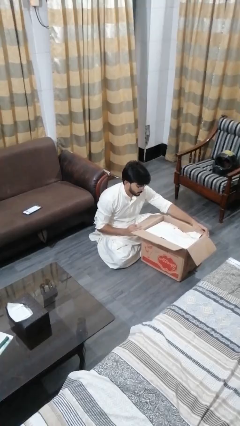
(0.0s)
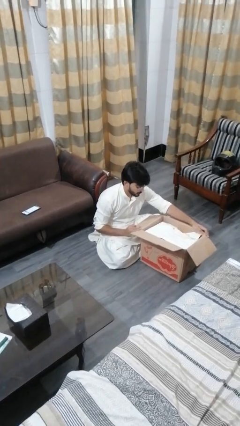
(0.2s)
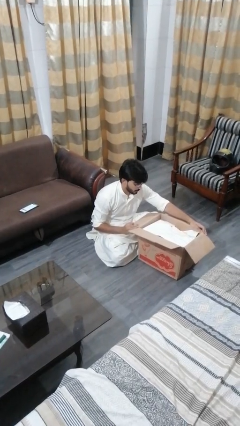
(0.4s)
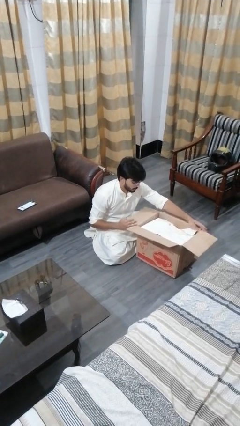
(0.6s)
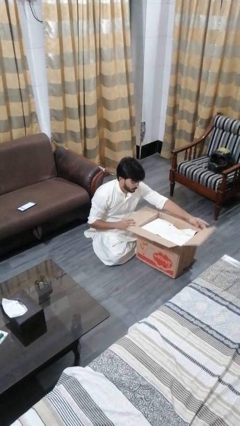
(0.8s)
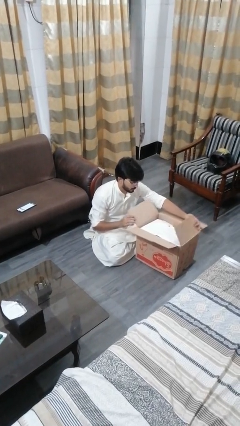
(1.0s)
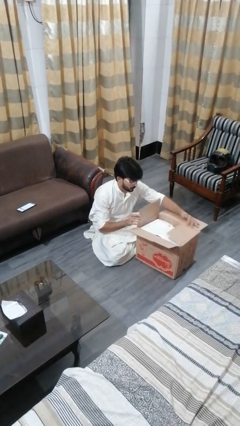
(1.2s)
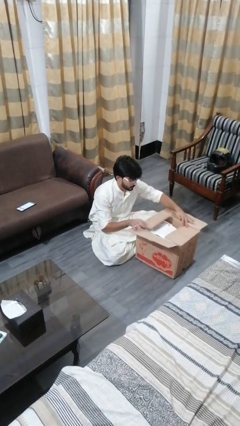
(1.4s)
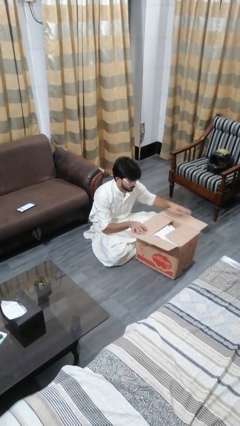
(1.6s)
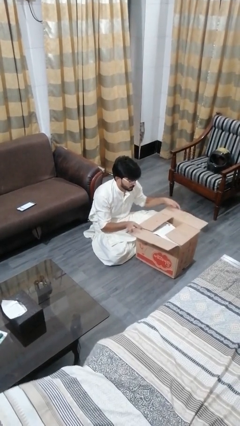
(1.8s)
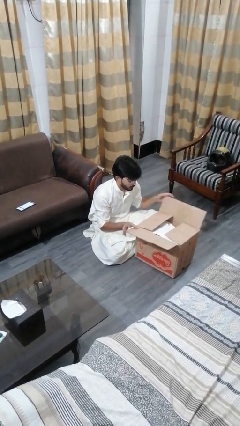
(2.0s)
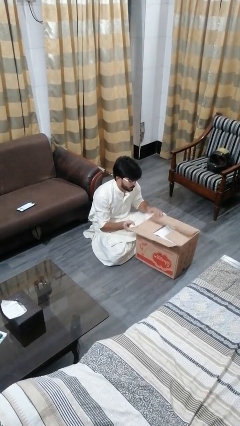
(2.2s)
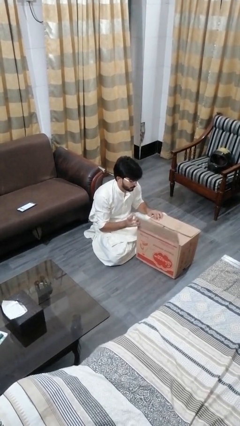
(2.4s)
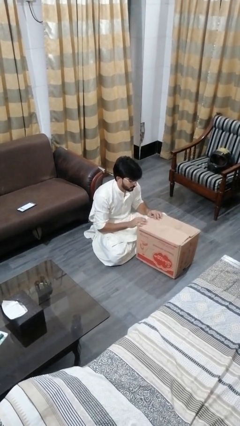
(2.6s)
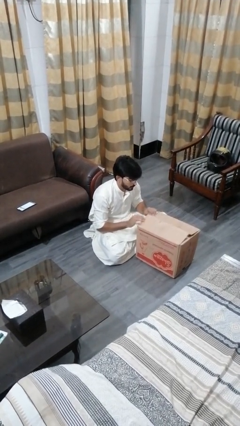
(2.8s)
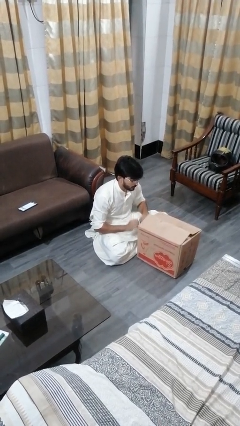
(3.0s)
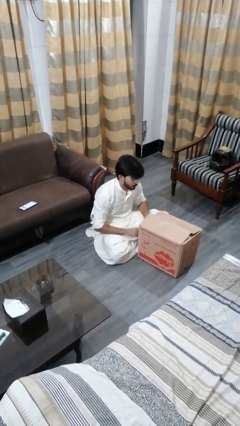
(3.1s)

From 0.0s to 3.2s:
person closes box

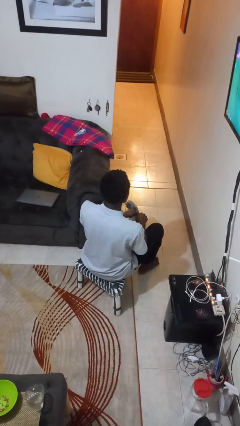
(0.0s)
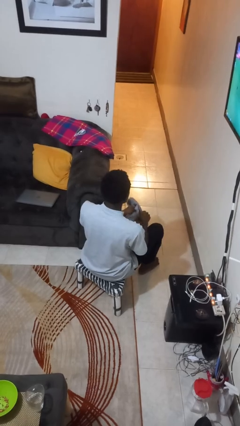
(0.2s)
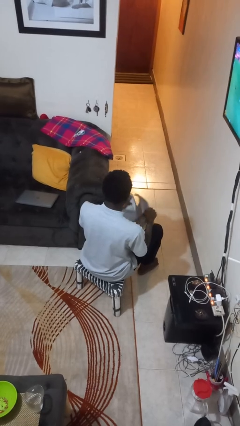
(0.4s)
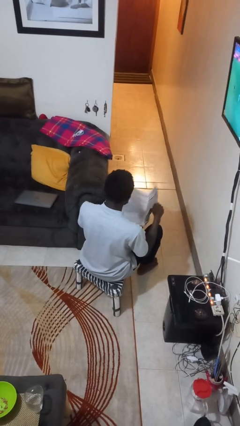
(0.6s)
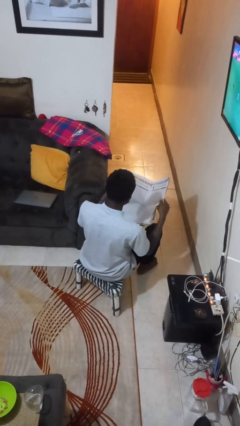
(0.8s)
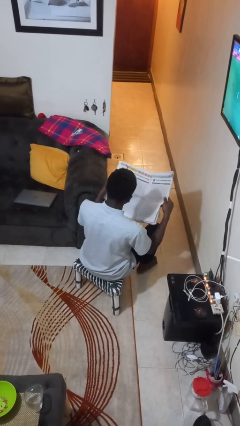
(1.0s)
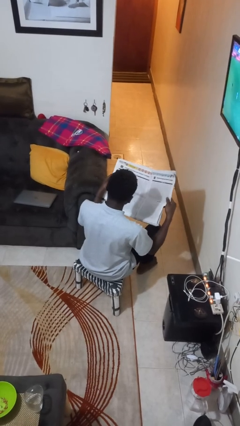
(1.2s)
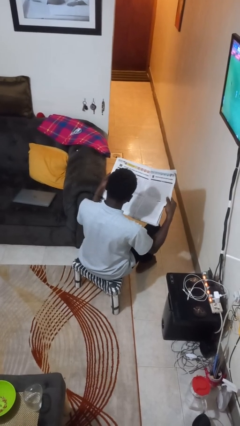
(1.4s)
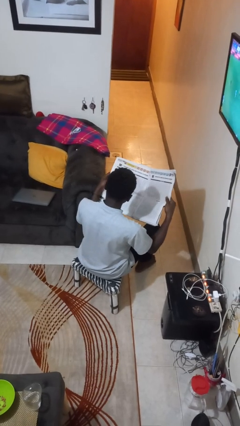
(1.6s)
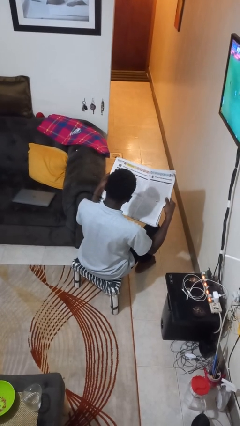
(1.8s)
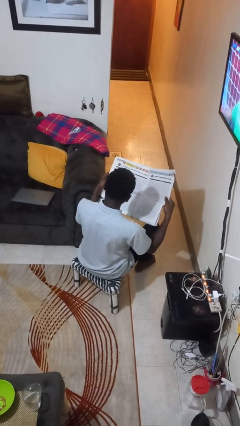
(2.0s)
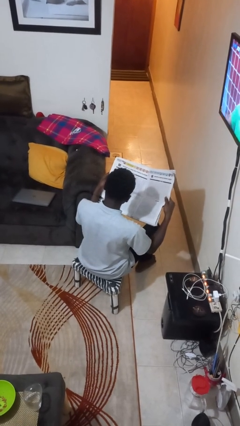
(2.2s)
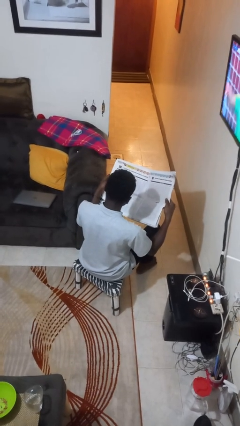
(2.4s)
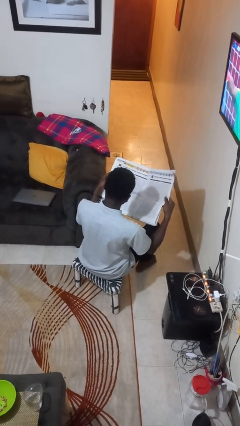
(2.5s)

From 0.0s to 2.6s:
person reads newspaper

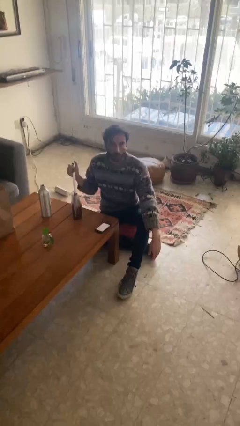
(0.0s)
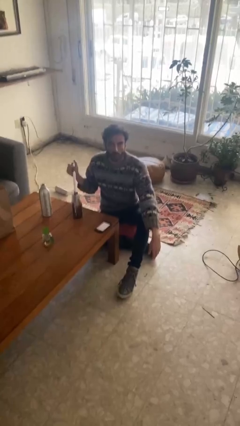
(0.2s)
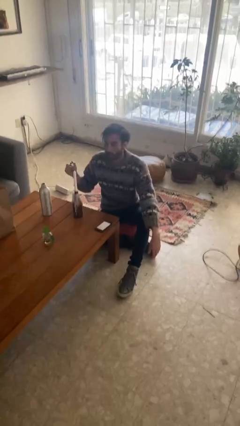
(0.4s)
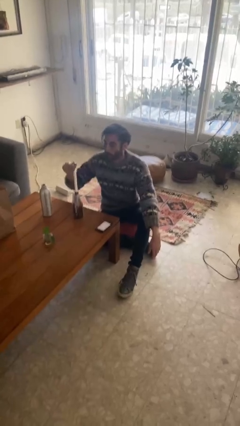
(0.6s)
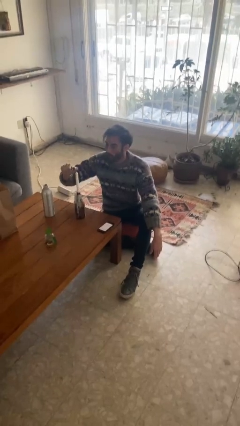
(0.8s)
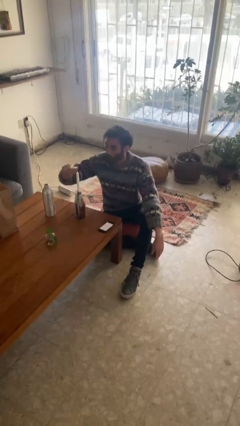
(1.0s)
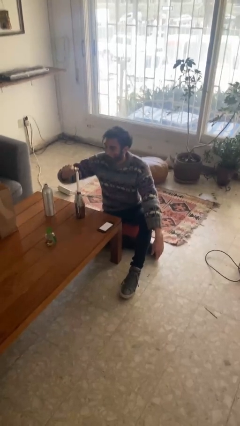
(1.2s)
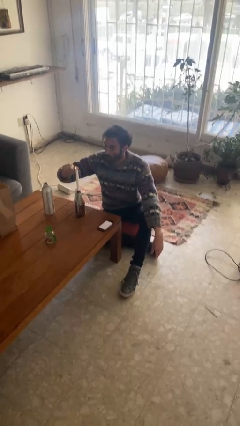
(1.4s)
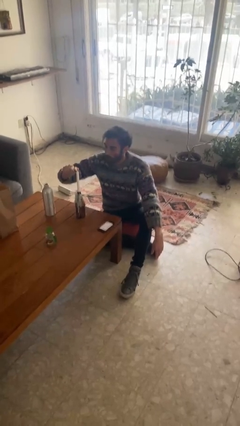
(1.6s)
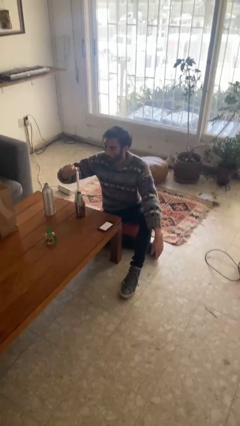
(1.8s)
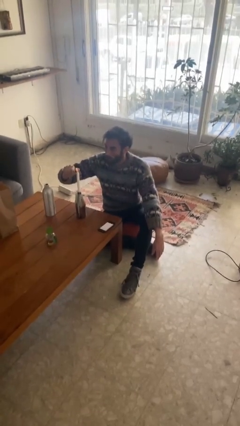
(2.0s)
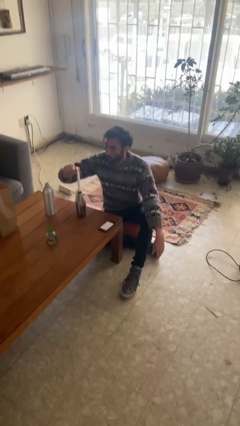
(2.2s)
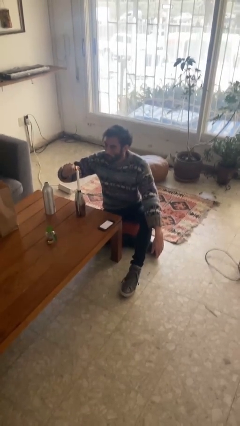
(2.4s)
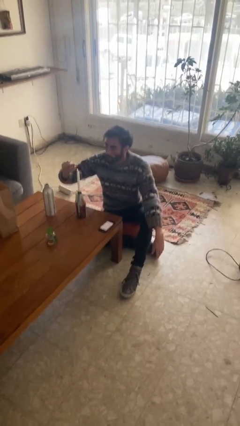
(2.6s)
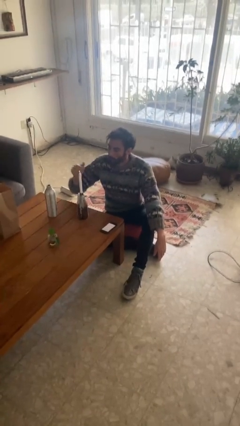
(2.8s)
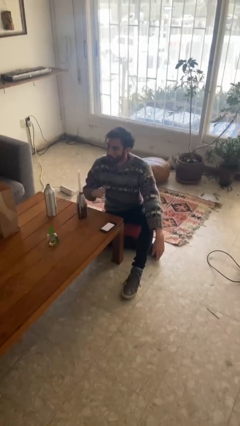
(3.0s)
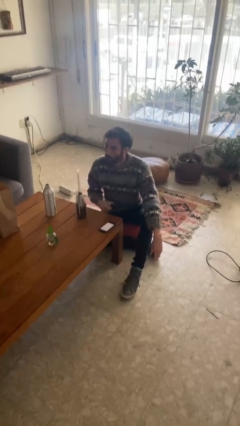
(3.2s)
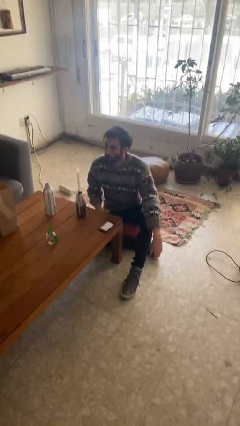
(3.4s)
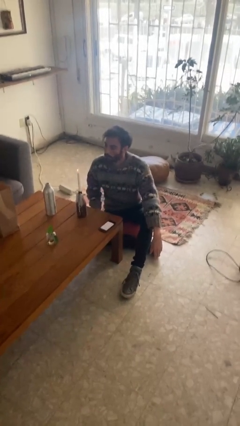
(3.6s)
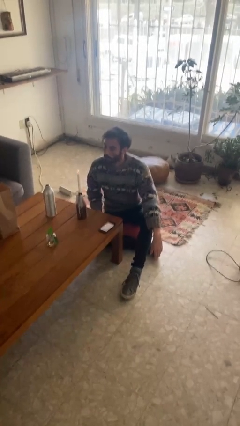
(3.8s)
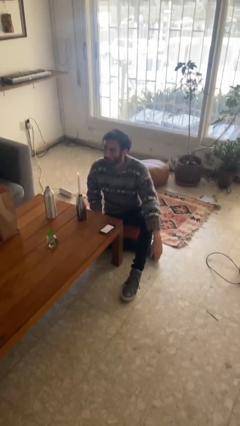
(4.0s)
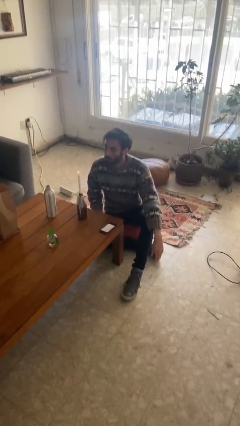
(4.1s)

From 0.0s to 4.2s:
person lights candle

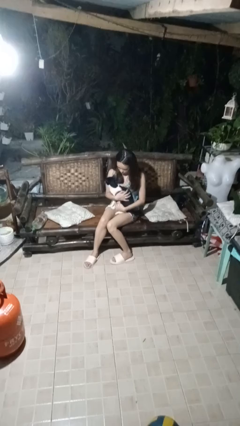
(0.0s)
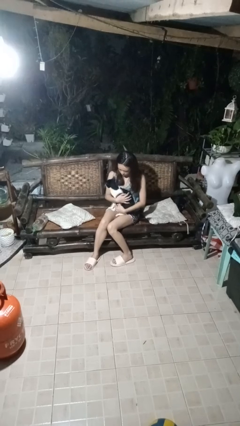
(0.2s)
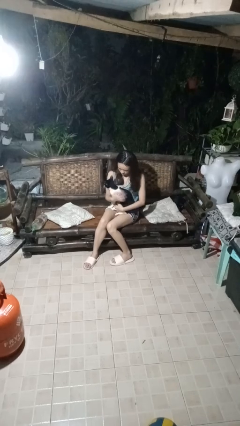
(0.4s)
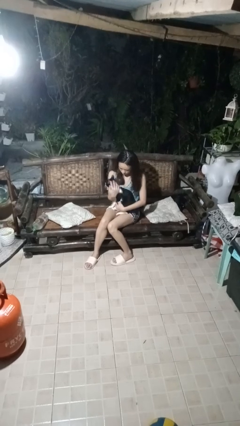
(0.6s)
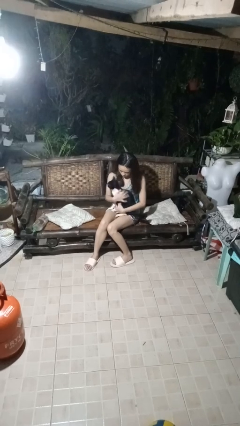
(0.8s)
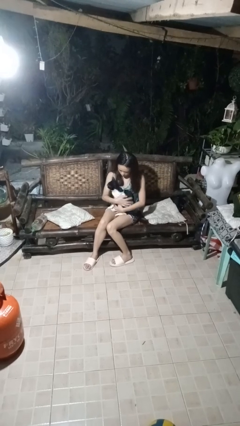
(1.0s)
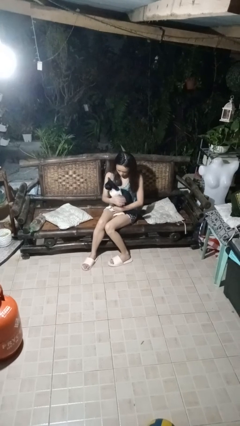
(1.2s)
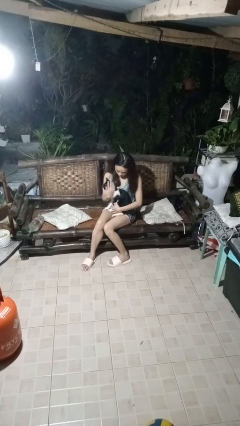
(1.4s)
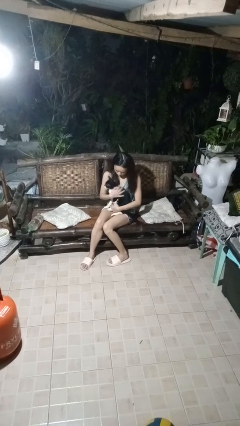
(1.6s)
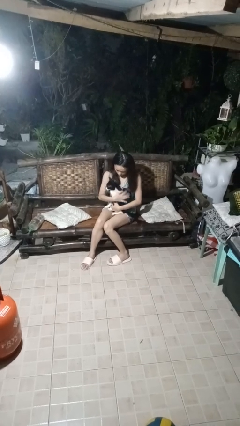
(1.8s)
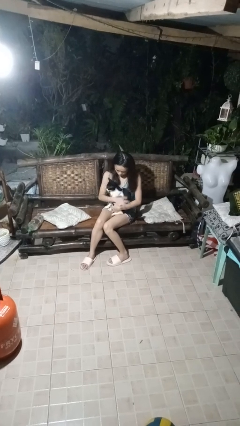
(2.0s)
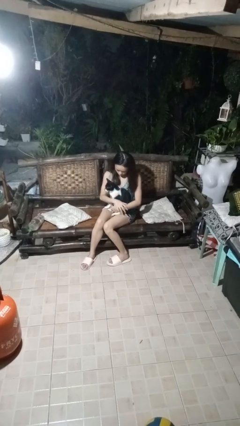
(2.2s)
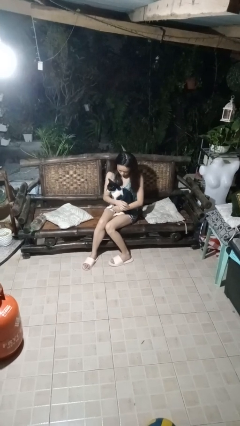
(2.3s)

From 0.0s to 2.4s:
person pets cat

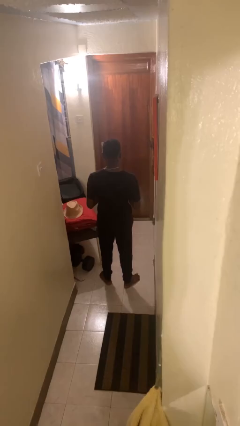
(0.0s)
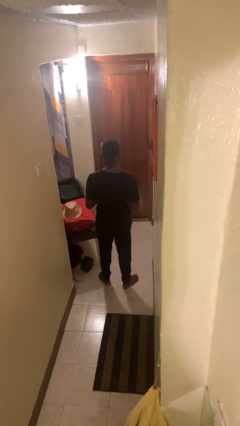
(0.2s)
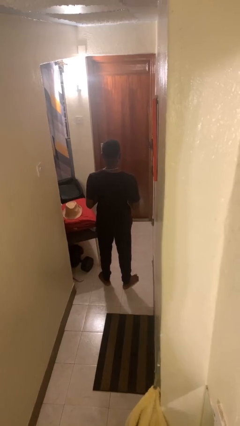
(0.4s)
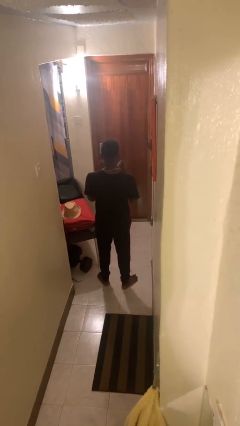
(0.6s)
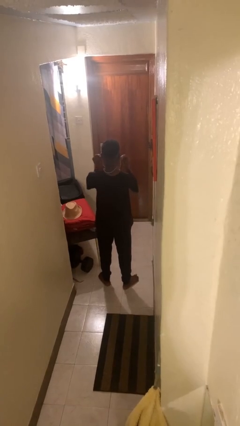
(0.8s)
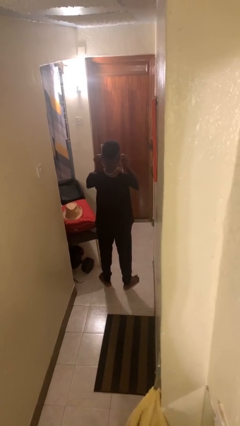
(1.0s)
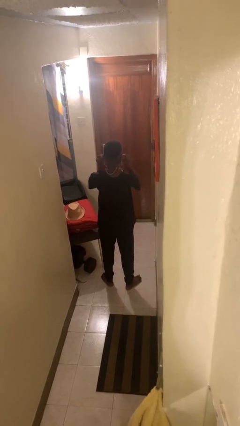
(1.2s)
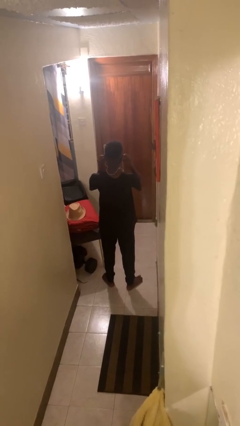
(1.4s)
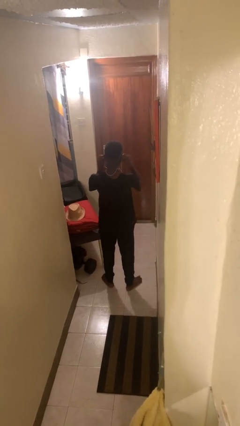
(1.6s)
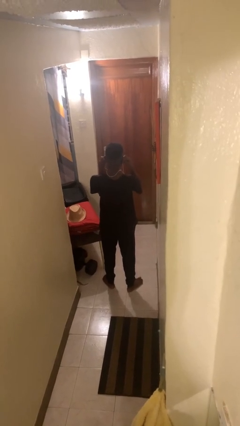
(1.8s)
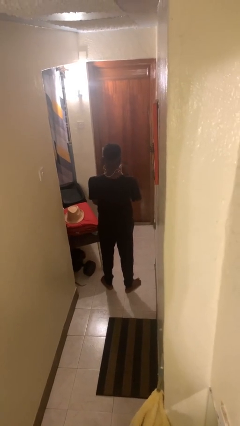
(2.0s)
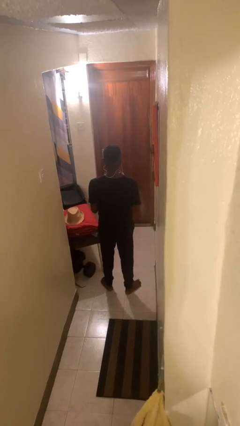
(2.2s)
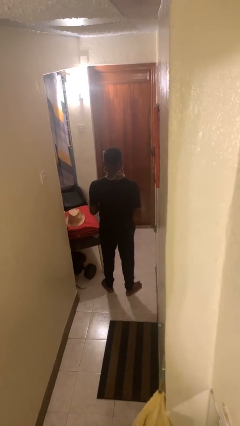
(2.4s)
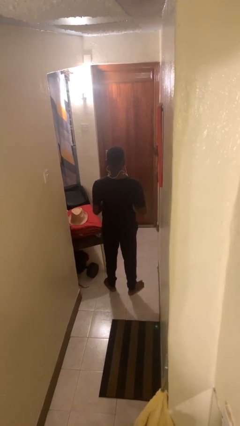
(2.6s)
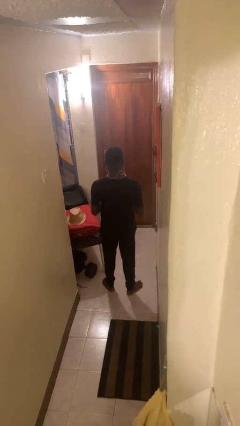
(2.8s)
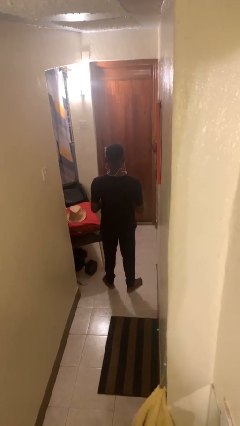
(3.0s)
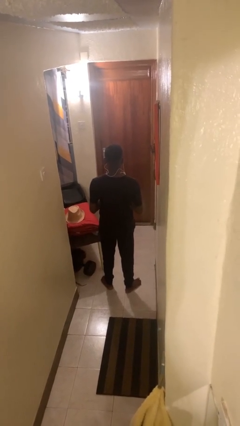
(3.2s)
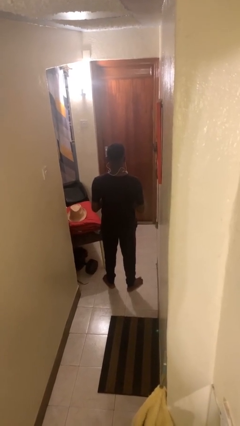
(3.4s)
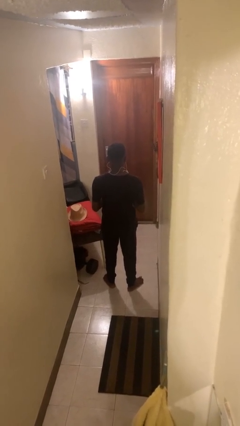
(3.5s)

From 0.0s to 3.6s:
person puts on headphones

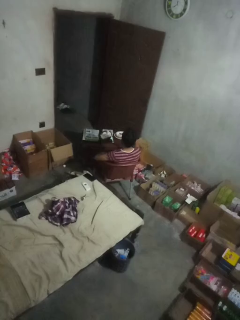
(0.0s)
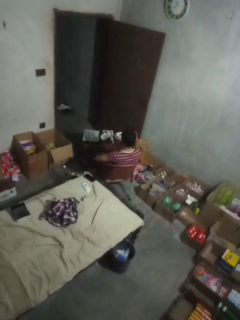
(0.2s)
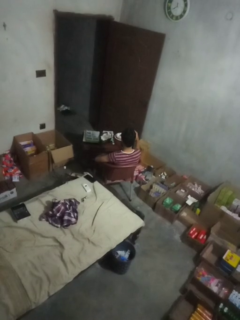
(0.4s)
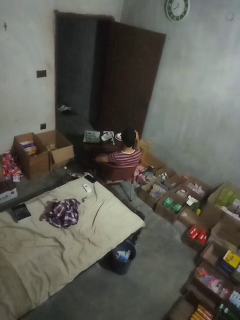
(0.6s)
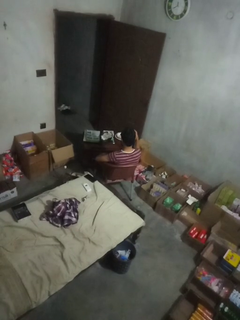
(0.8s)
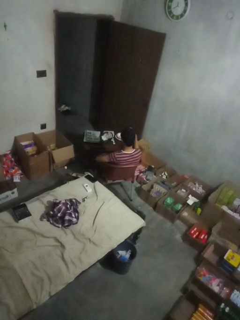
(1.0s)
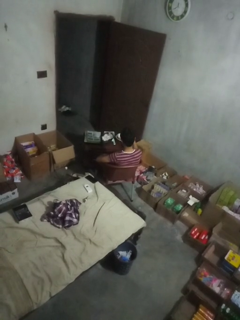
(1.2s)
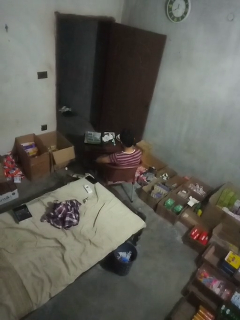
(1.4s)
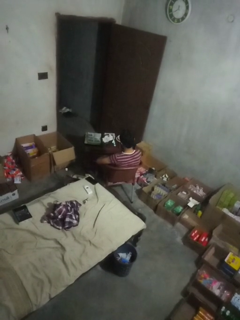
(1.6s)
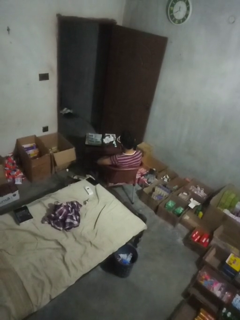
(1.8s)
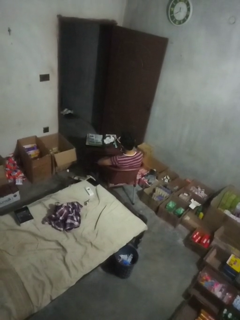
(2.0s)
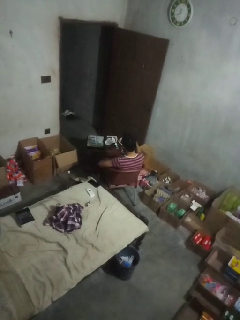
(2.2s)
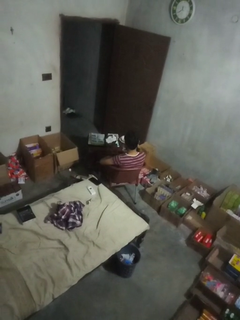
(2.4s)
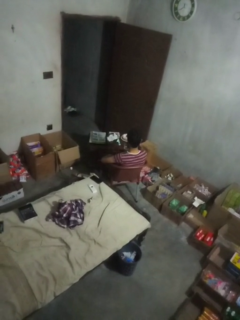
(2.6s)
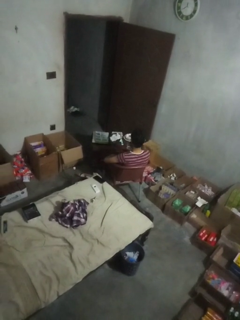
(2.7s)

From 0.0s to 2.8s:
person puts down object on table
